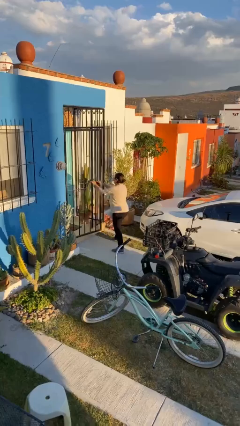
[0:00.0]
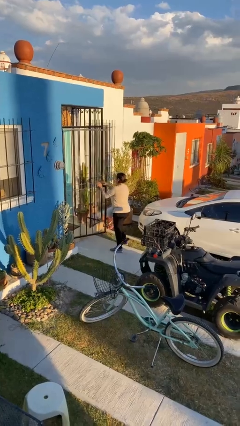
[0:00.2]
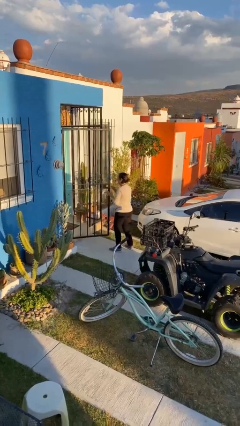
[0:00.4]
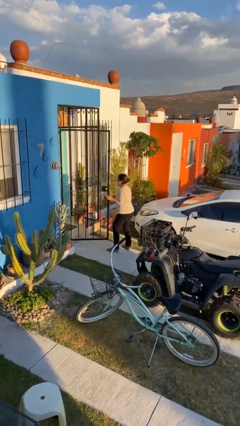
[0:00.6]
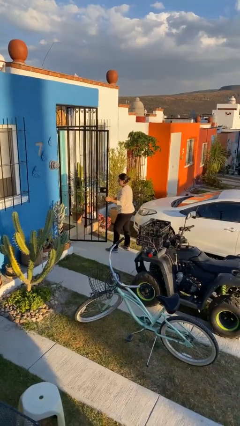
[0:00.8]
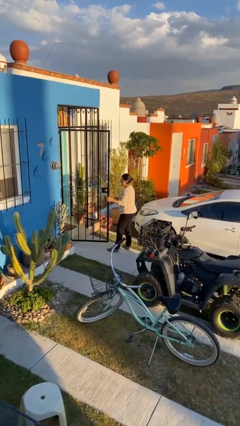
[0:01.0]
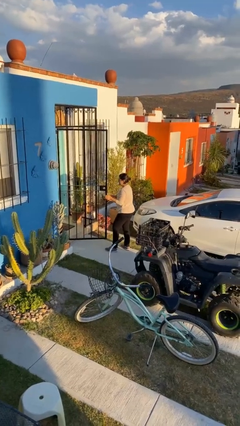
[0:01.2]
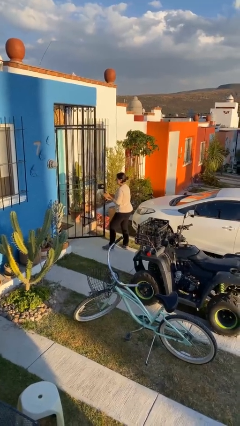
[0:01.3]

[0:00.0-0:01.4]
person opens facility door

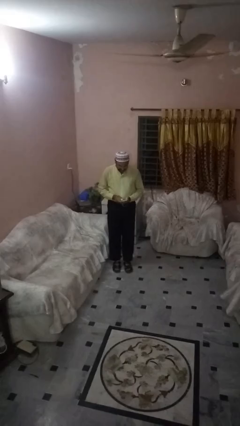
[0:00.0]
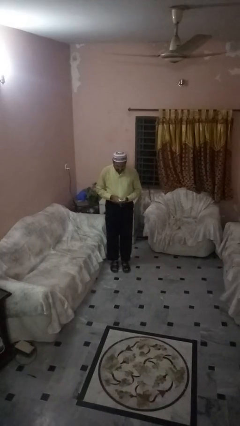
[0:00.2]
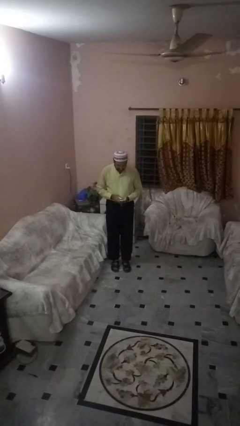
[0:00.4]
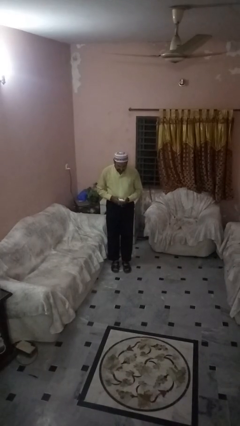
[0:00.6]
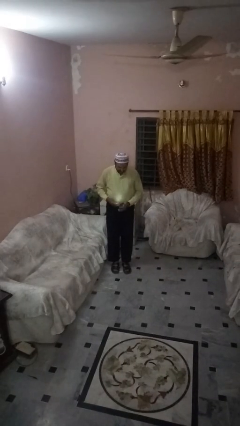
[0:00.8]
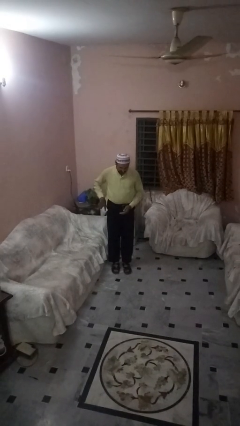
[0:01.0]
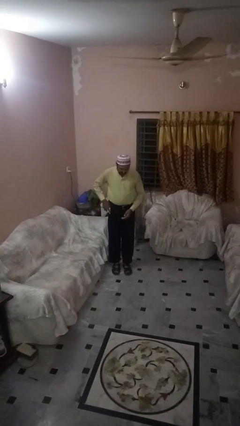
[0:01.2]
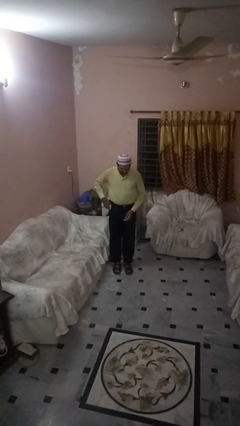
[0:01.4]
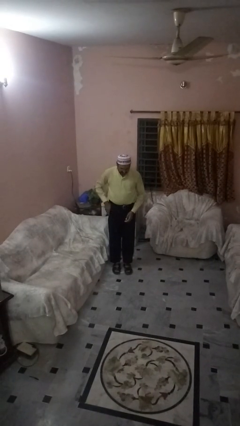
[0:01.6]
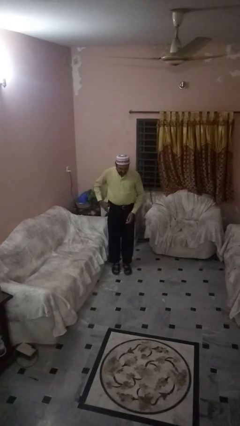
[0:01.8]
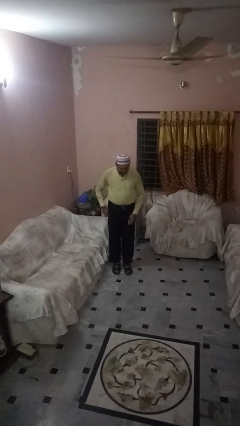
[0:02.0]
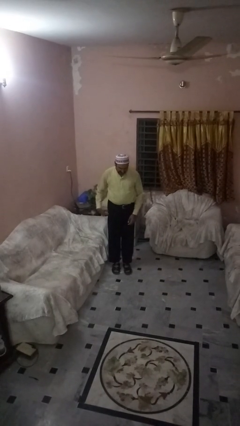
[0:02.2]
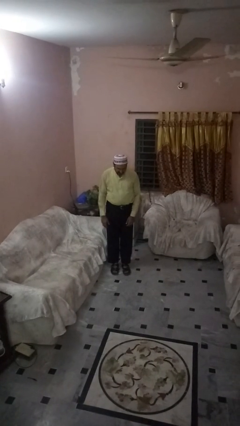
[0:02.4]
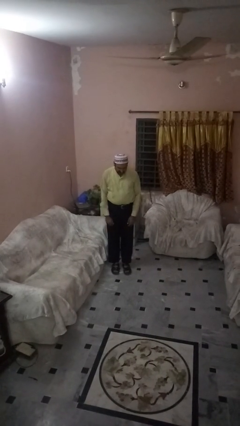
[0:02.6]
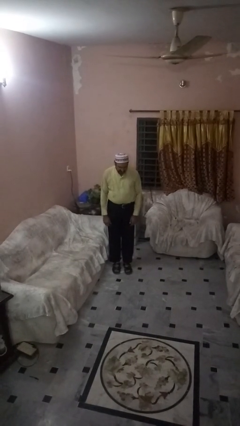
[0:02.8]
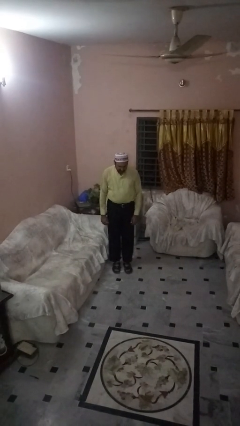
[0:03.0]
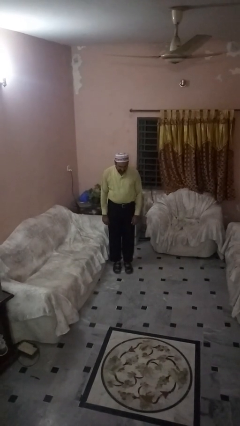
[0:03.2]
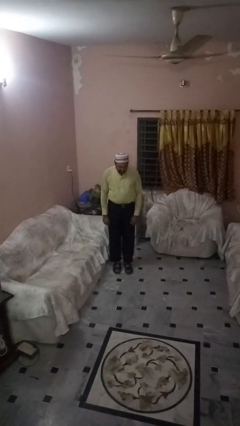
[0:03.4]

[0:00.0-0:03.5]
person puts phone into pocket

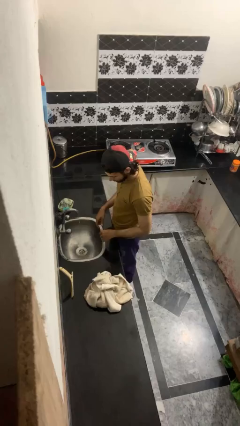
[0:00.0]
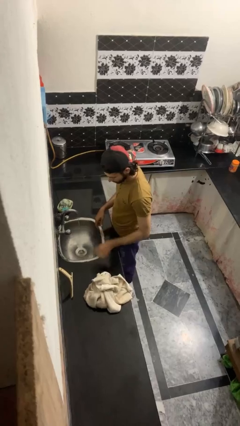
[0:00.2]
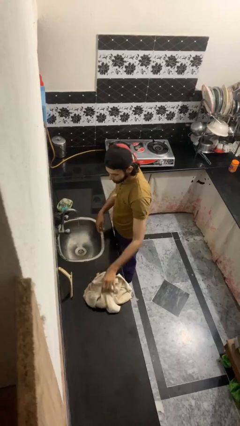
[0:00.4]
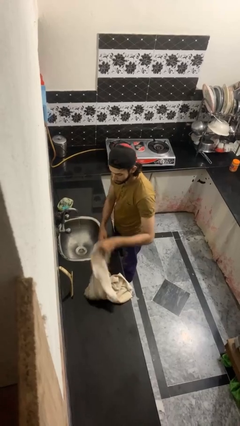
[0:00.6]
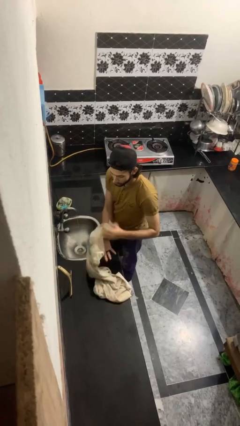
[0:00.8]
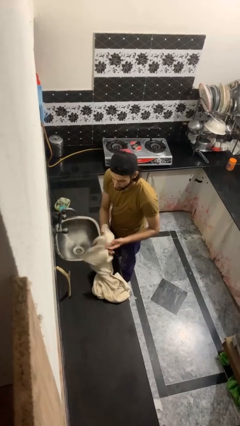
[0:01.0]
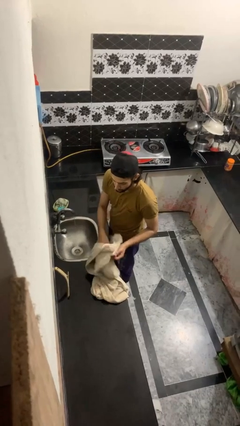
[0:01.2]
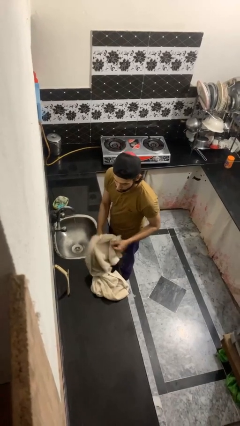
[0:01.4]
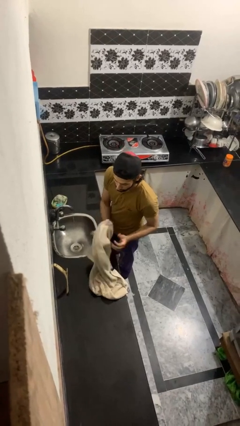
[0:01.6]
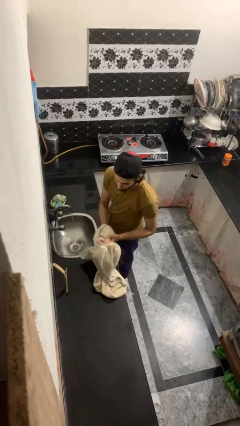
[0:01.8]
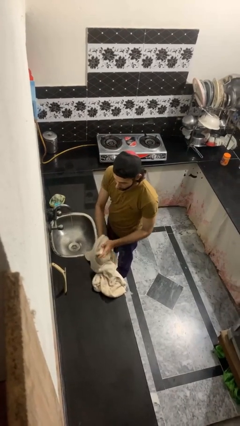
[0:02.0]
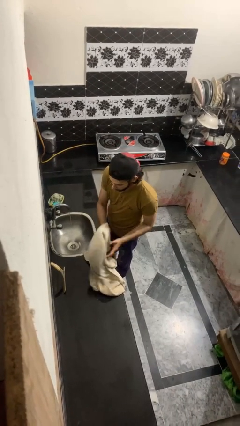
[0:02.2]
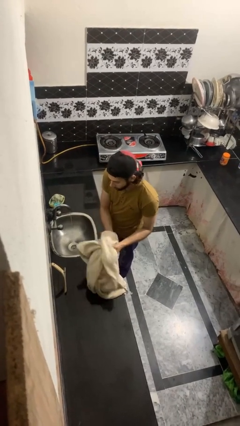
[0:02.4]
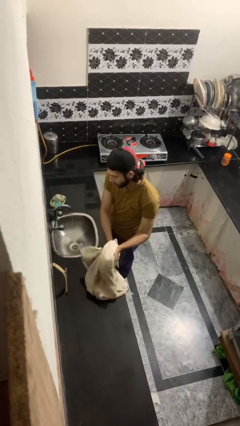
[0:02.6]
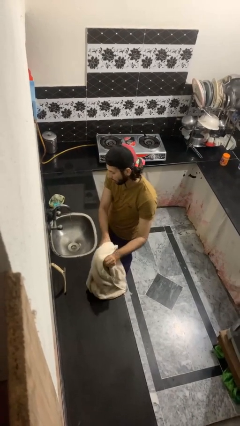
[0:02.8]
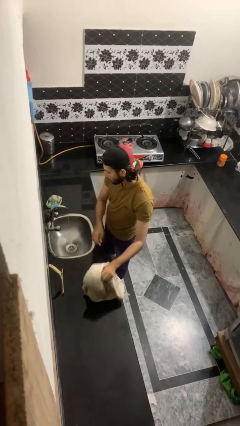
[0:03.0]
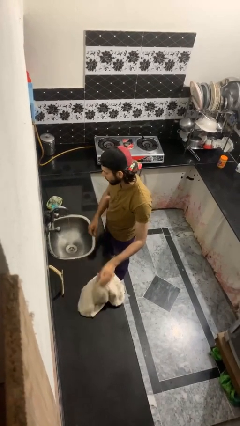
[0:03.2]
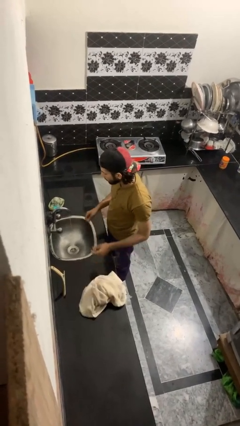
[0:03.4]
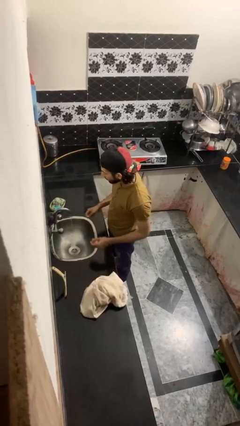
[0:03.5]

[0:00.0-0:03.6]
person dries hands with towel

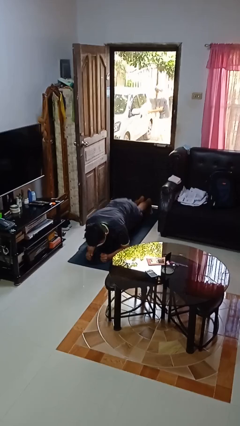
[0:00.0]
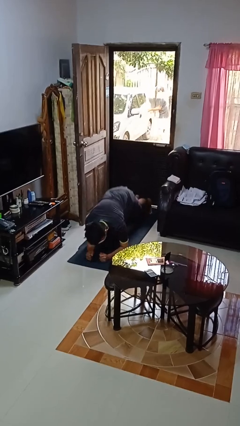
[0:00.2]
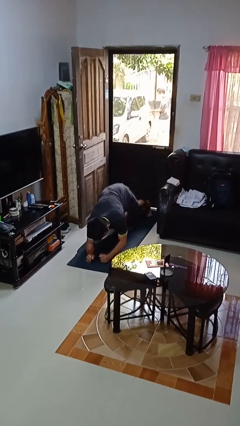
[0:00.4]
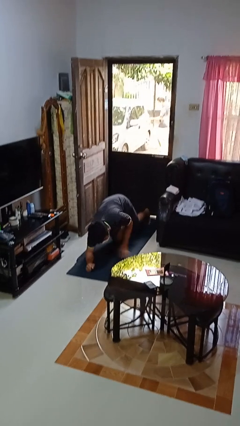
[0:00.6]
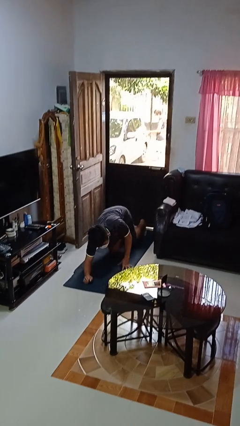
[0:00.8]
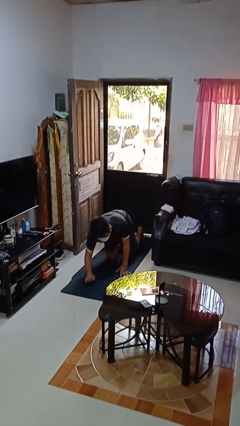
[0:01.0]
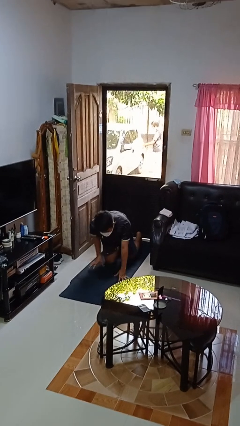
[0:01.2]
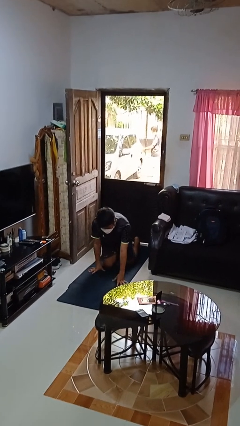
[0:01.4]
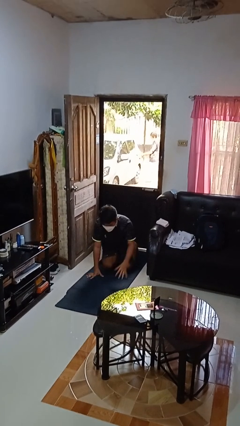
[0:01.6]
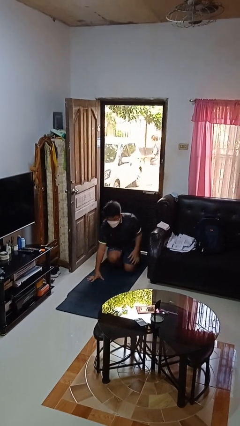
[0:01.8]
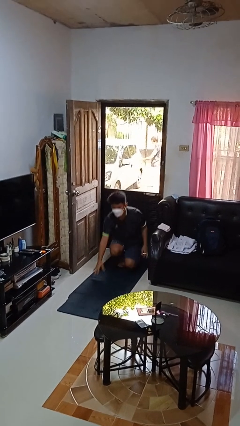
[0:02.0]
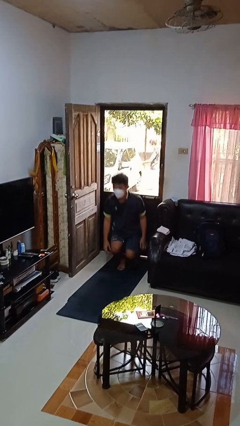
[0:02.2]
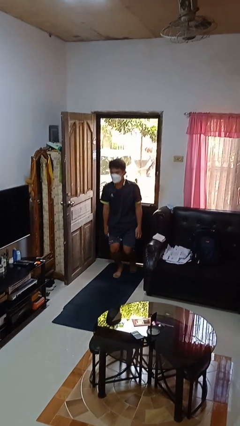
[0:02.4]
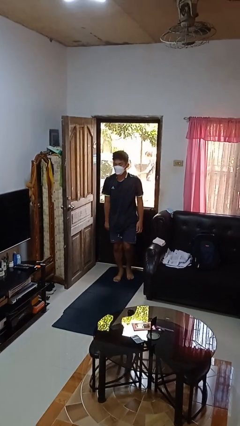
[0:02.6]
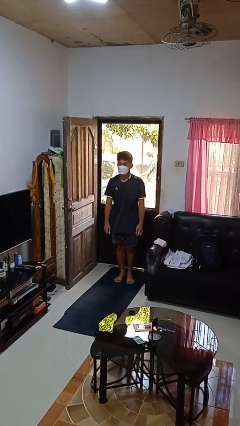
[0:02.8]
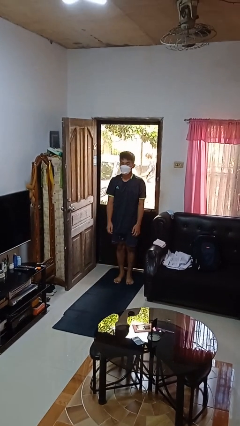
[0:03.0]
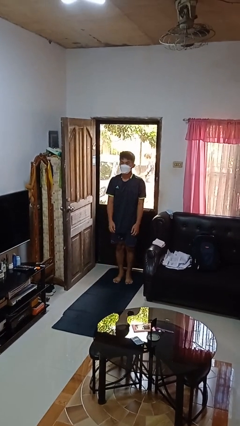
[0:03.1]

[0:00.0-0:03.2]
person stands up from floor

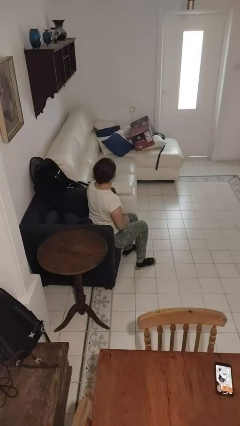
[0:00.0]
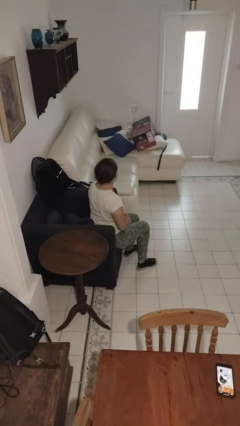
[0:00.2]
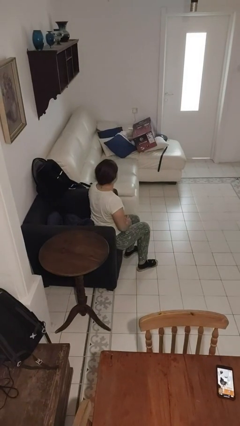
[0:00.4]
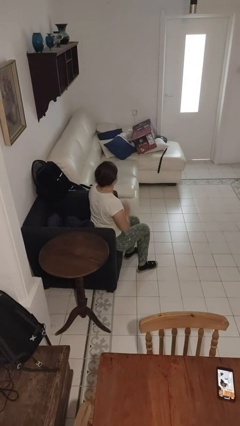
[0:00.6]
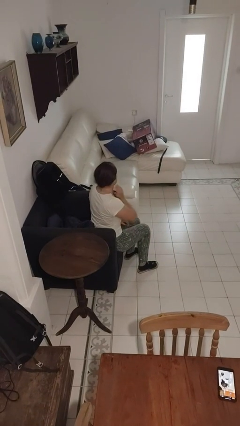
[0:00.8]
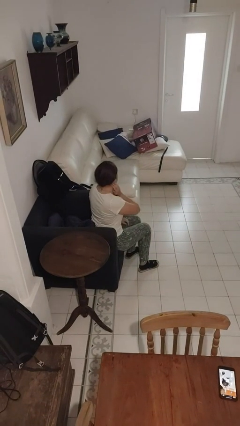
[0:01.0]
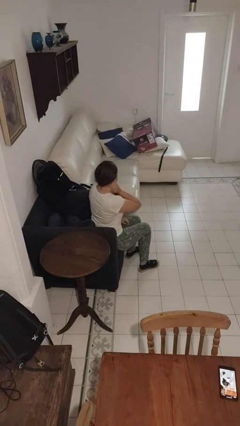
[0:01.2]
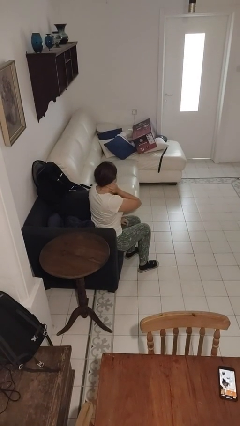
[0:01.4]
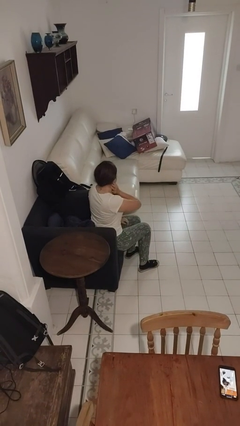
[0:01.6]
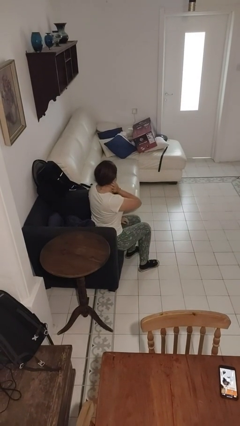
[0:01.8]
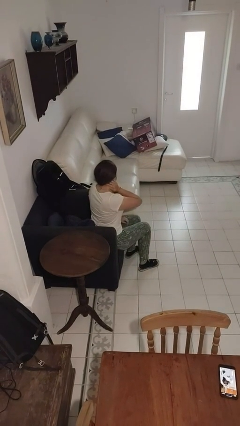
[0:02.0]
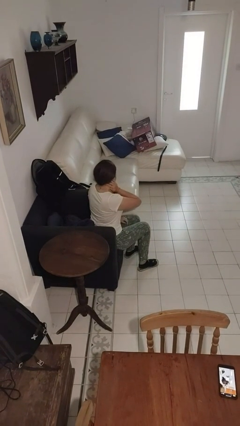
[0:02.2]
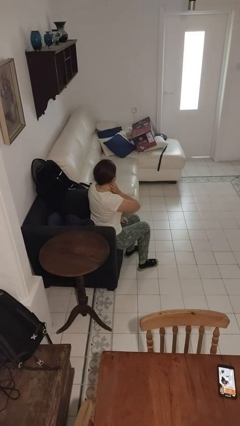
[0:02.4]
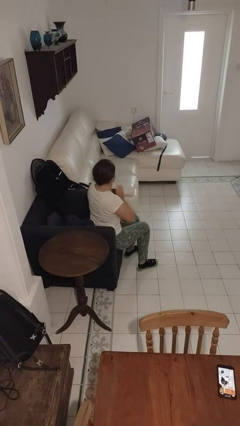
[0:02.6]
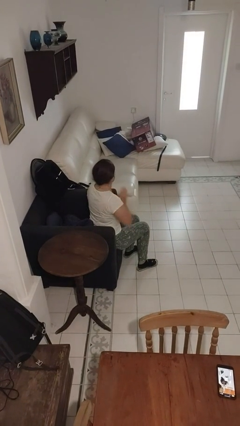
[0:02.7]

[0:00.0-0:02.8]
person rubs neck

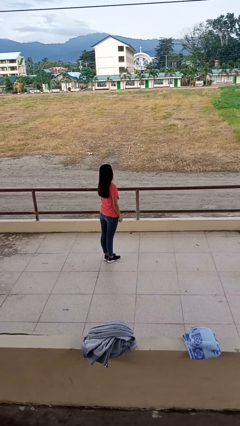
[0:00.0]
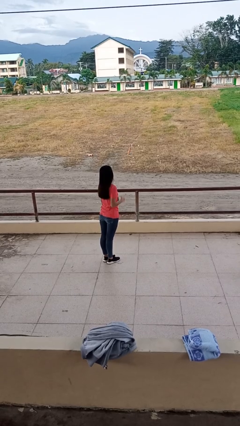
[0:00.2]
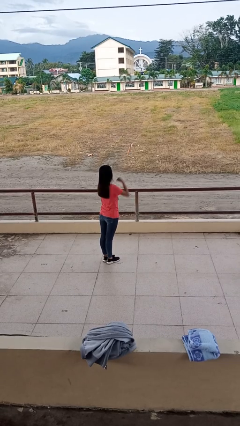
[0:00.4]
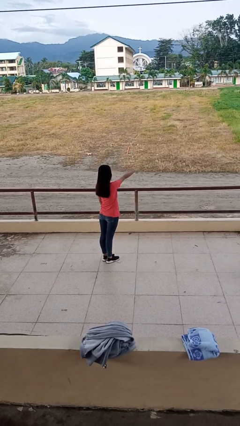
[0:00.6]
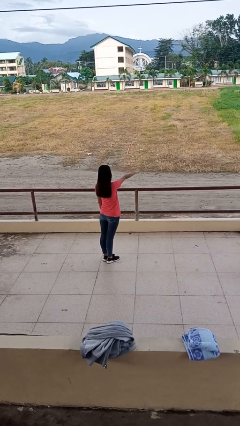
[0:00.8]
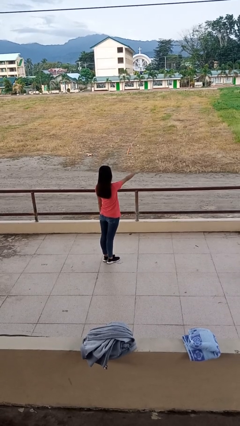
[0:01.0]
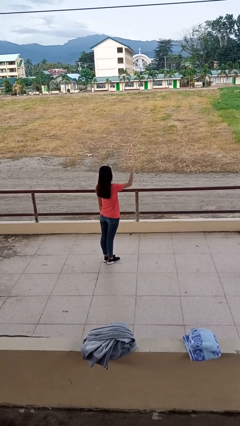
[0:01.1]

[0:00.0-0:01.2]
person punches

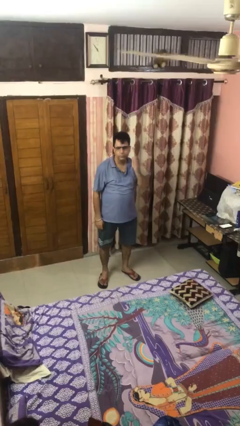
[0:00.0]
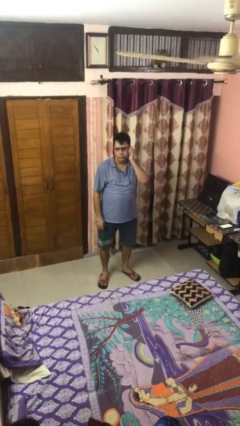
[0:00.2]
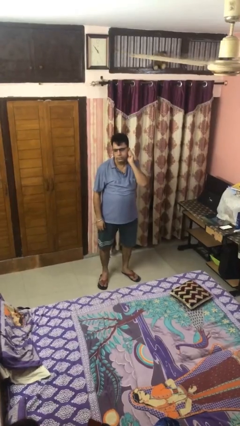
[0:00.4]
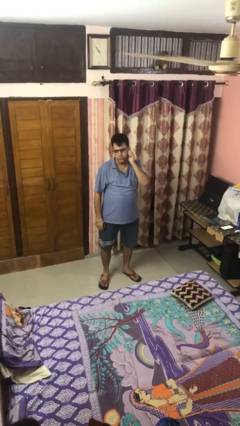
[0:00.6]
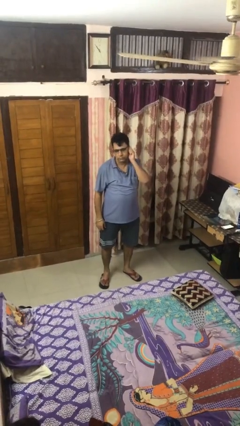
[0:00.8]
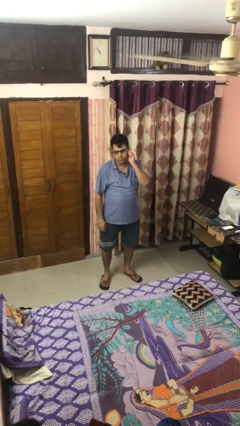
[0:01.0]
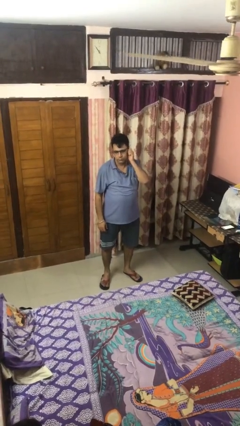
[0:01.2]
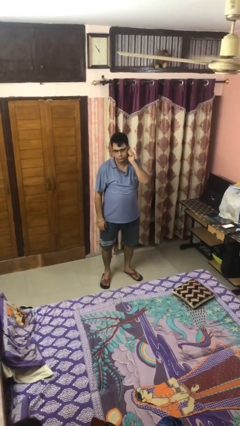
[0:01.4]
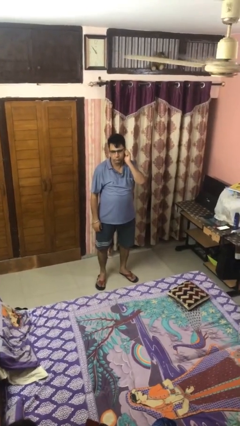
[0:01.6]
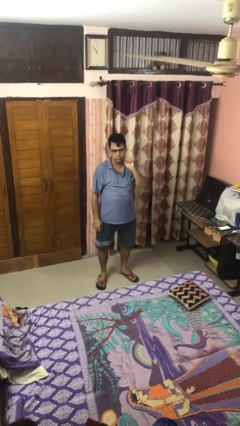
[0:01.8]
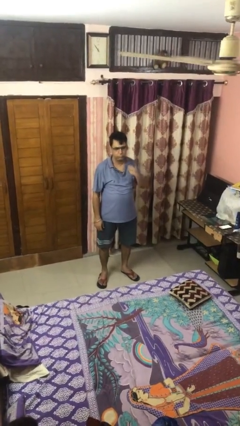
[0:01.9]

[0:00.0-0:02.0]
person touches earlobe
